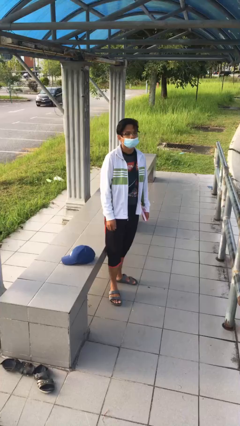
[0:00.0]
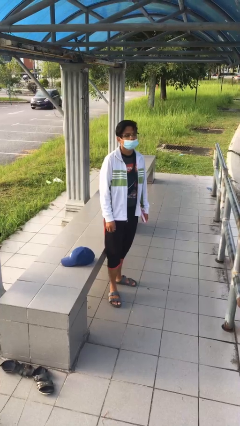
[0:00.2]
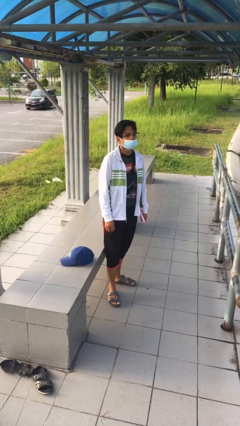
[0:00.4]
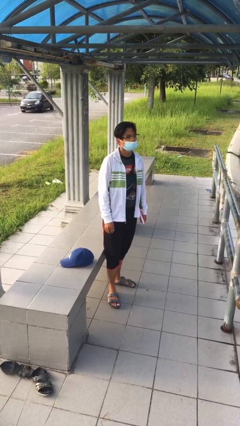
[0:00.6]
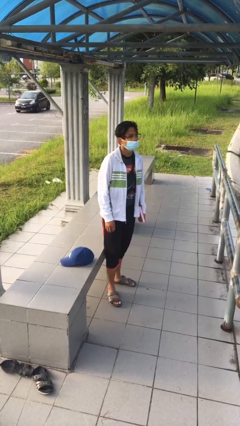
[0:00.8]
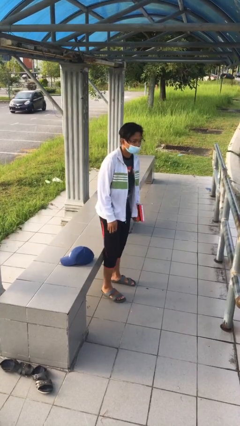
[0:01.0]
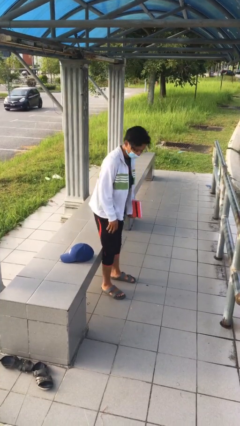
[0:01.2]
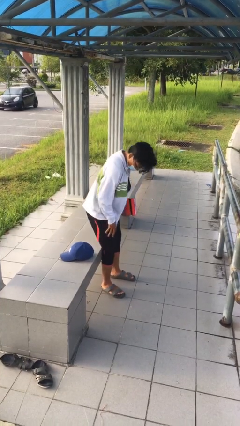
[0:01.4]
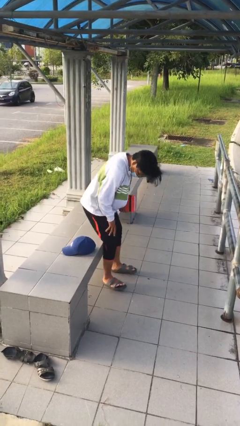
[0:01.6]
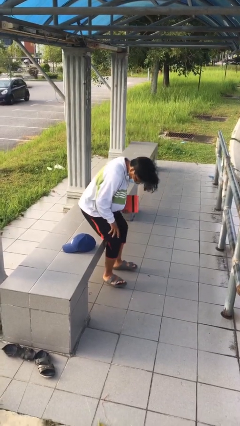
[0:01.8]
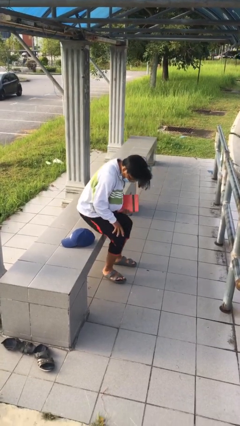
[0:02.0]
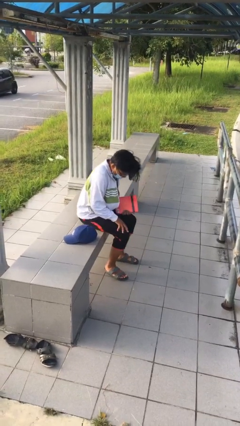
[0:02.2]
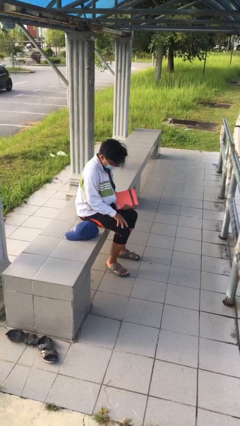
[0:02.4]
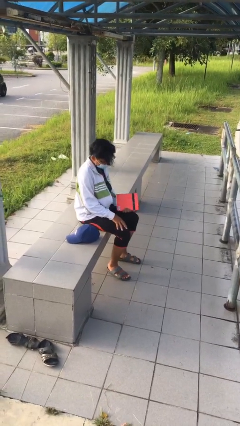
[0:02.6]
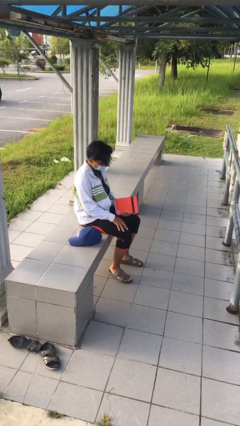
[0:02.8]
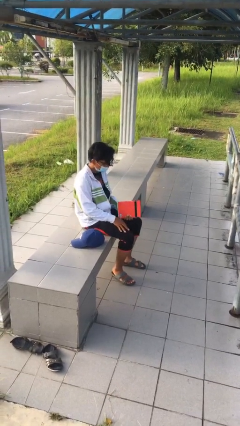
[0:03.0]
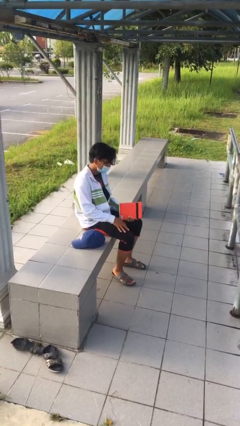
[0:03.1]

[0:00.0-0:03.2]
person sits down

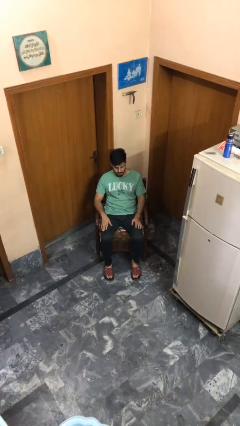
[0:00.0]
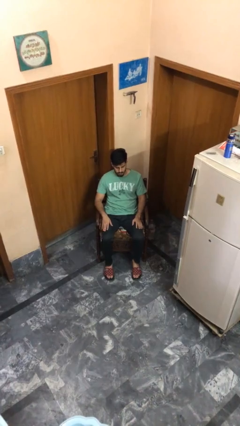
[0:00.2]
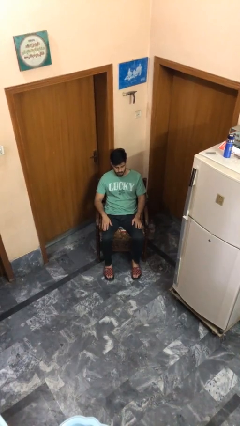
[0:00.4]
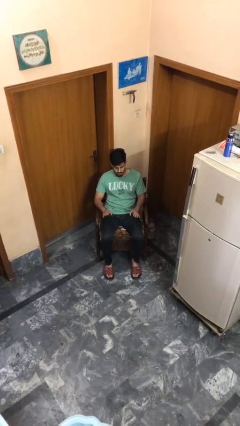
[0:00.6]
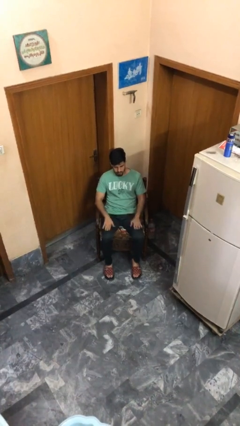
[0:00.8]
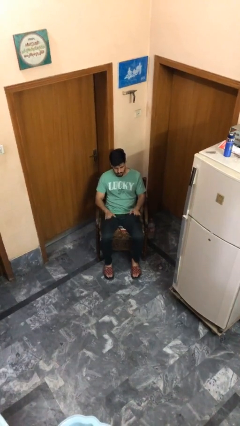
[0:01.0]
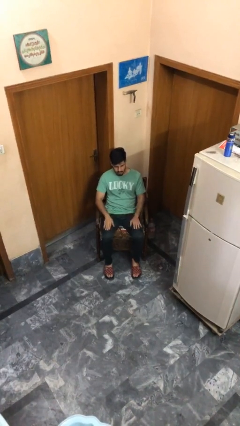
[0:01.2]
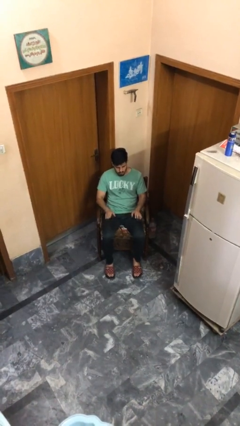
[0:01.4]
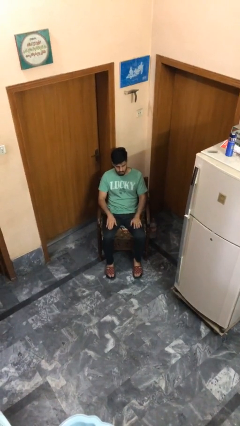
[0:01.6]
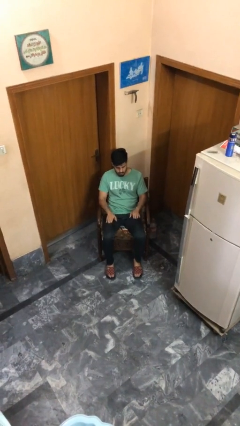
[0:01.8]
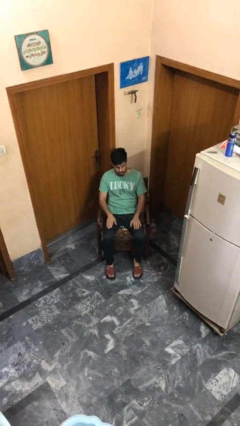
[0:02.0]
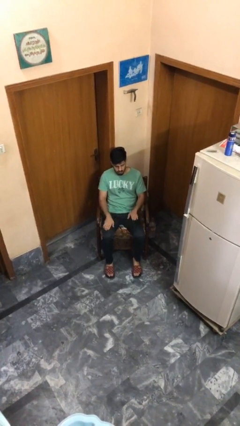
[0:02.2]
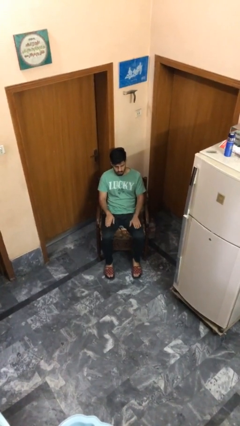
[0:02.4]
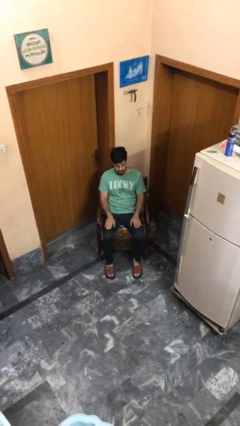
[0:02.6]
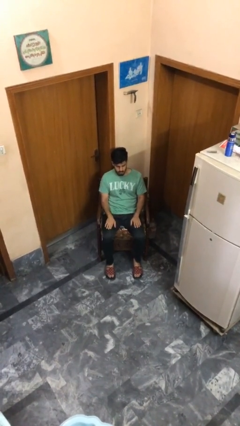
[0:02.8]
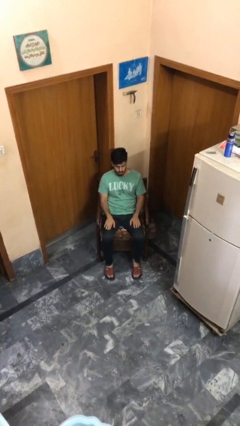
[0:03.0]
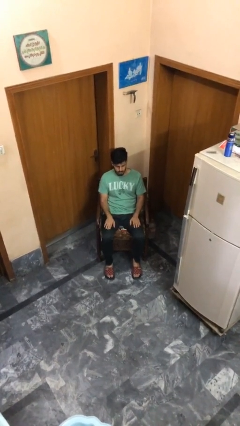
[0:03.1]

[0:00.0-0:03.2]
person slaps hands on thighs

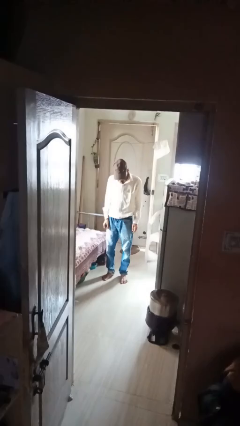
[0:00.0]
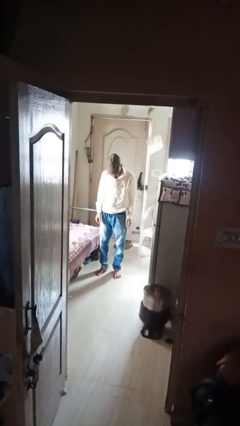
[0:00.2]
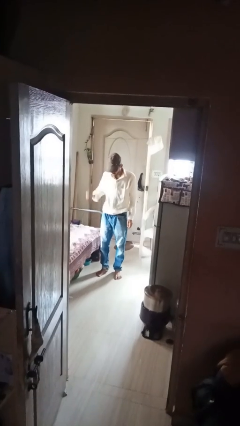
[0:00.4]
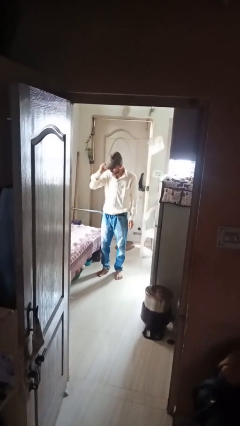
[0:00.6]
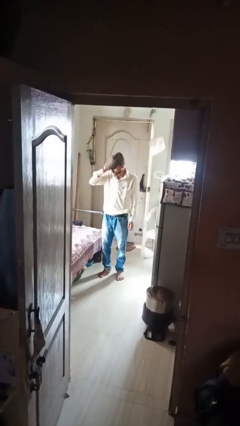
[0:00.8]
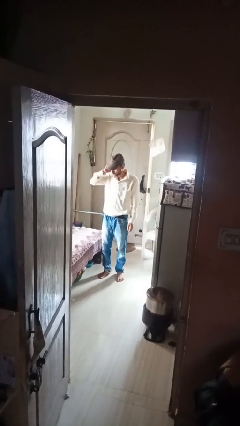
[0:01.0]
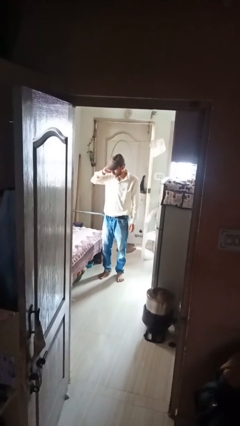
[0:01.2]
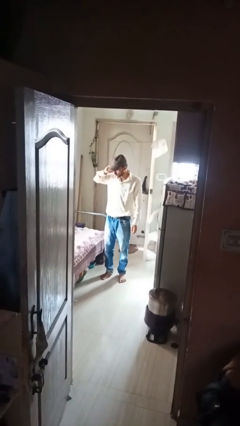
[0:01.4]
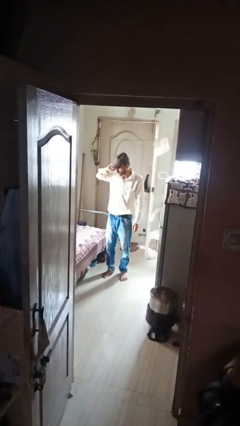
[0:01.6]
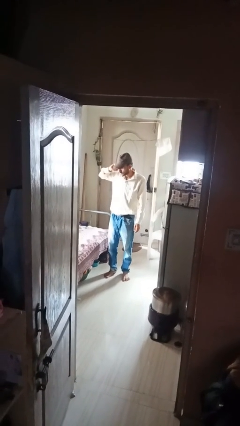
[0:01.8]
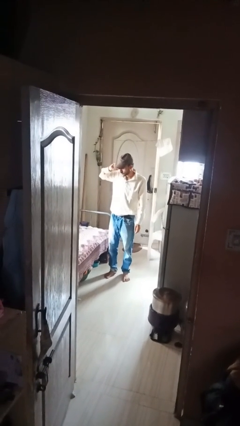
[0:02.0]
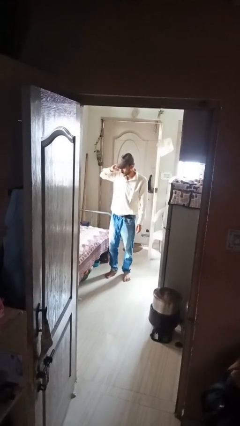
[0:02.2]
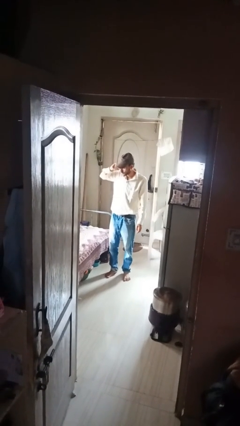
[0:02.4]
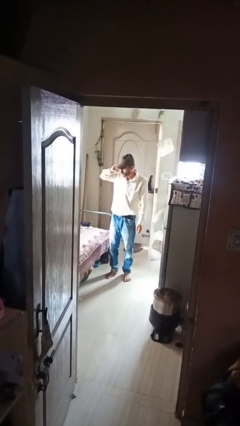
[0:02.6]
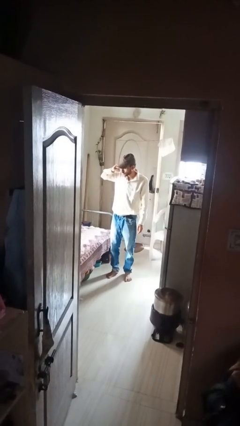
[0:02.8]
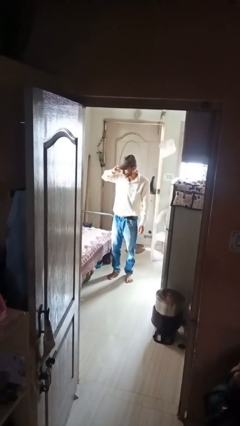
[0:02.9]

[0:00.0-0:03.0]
person touches earlobe

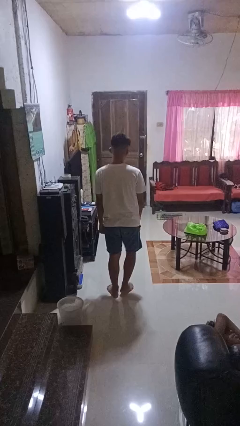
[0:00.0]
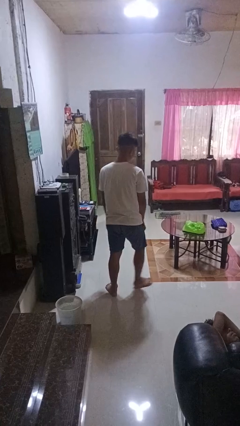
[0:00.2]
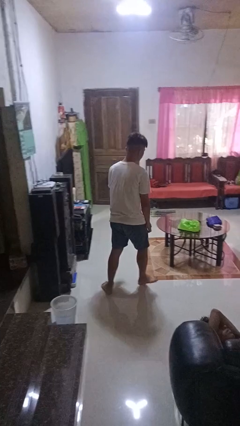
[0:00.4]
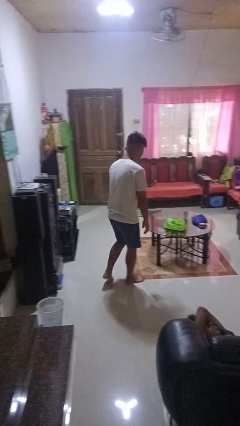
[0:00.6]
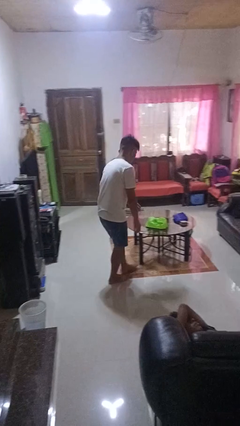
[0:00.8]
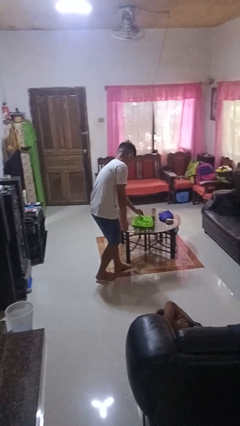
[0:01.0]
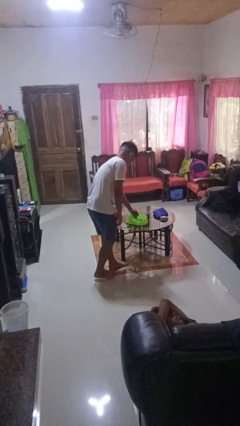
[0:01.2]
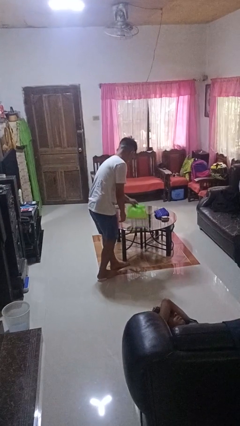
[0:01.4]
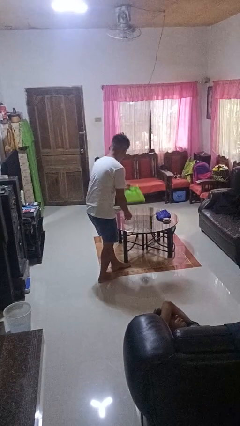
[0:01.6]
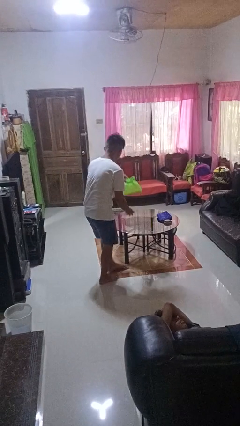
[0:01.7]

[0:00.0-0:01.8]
person picks up object from table

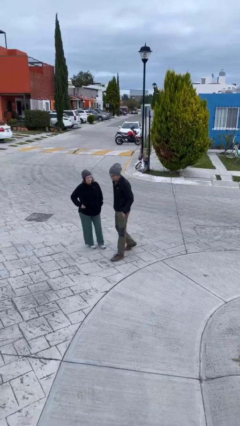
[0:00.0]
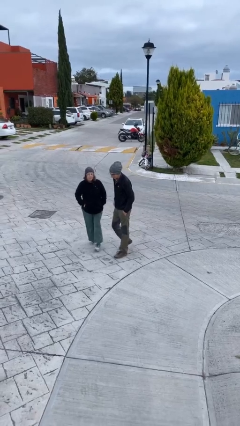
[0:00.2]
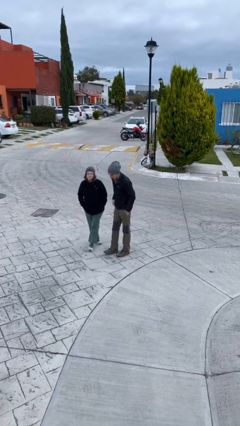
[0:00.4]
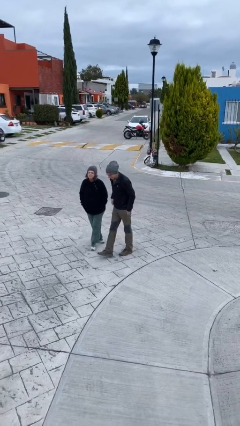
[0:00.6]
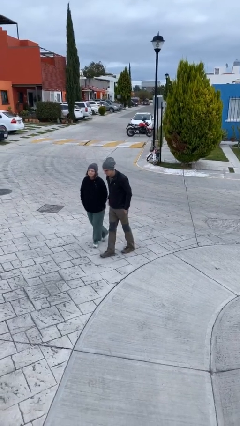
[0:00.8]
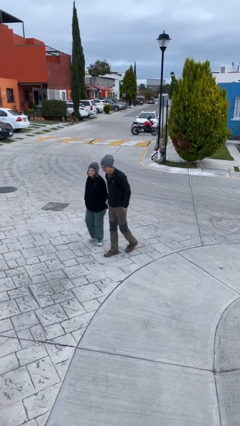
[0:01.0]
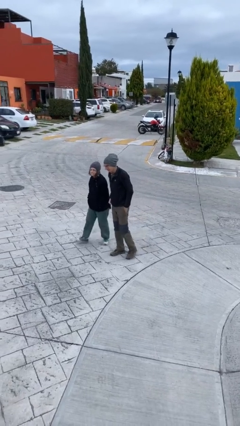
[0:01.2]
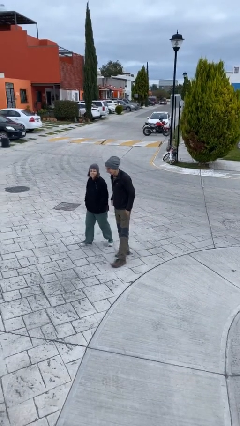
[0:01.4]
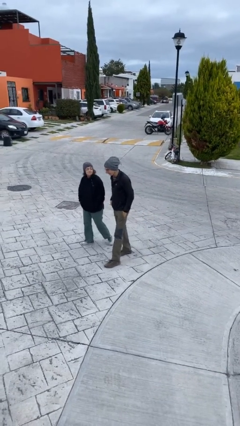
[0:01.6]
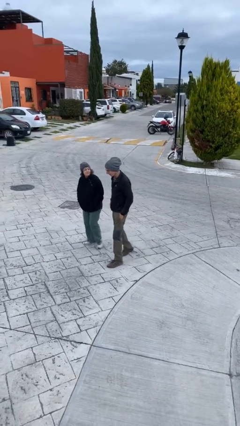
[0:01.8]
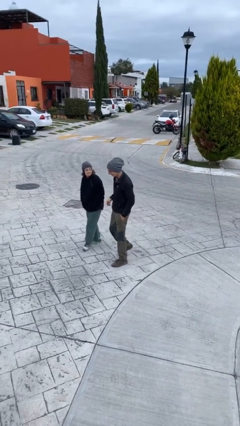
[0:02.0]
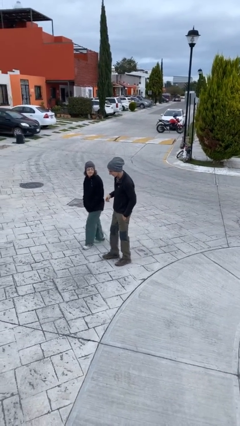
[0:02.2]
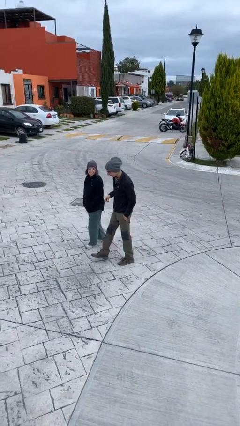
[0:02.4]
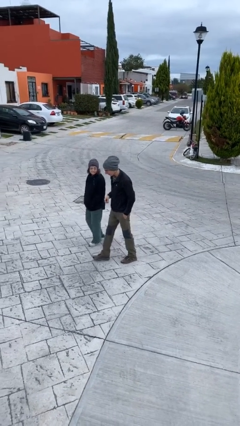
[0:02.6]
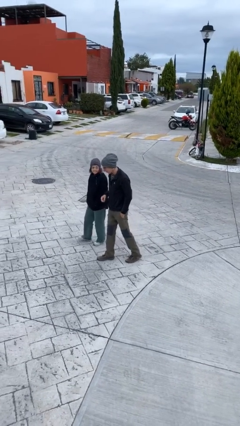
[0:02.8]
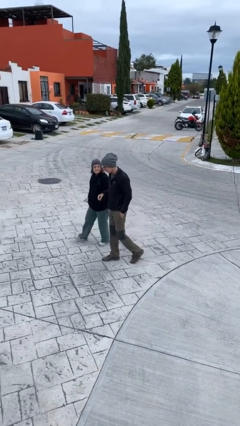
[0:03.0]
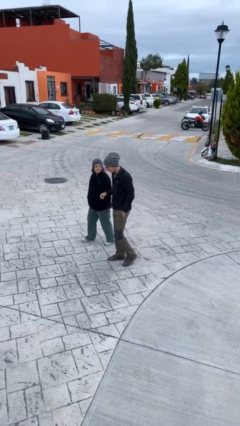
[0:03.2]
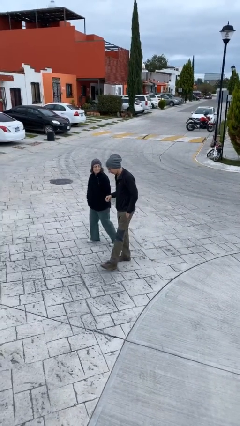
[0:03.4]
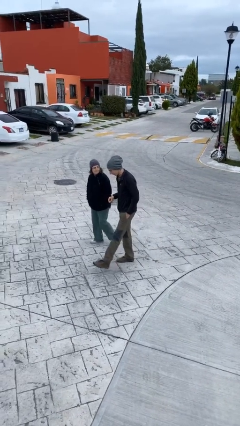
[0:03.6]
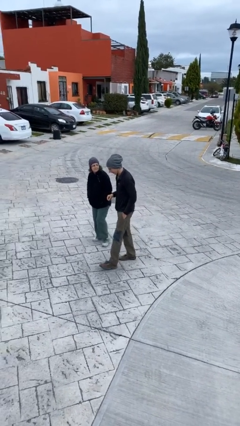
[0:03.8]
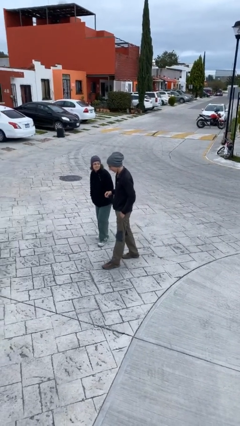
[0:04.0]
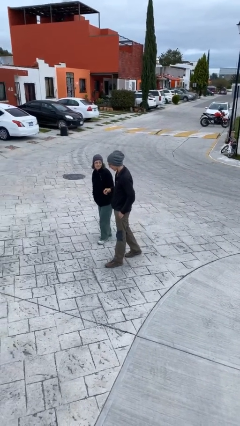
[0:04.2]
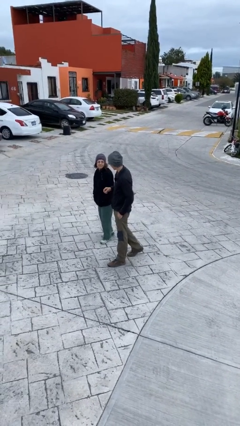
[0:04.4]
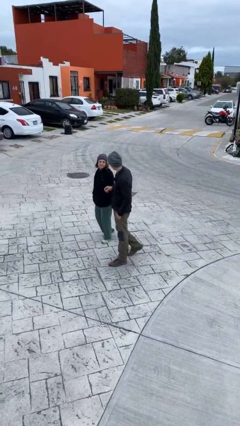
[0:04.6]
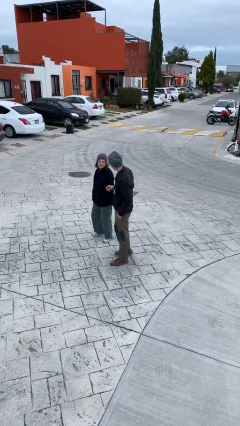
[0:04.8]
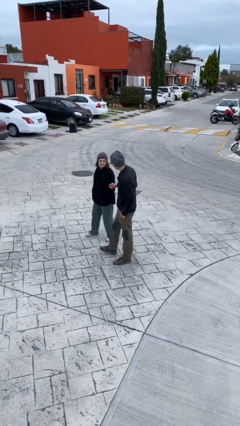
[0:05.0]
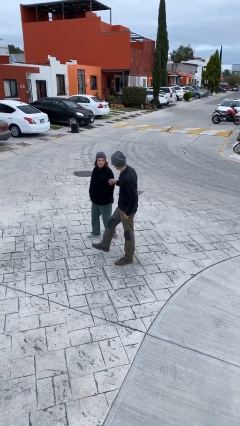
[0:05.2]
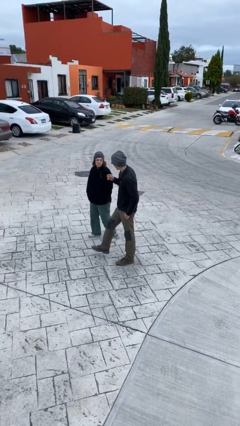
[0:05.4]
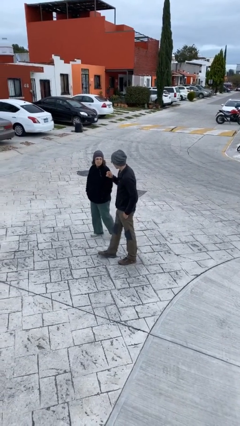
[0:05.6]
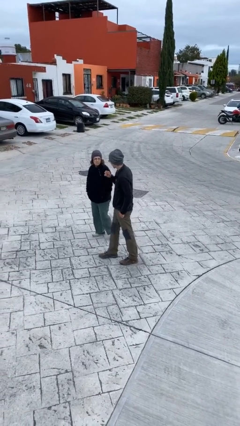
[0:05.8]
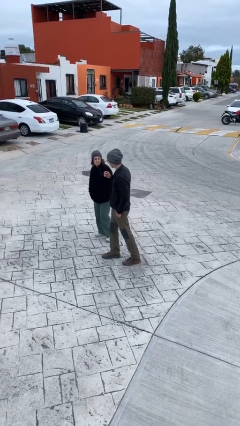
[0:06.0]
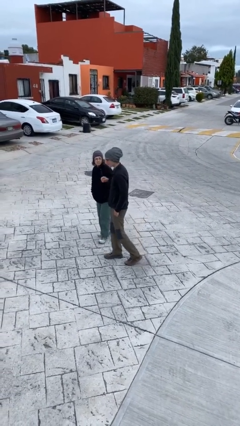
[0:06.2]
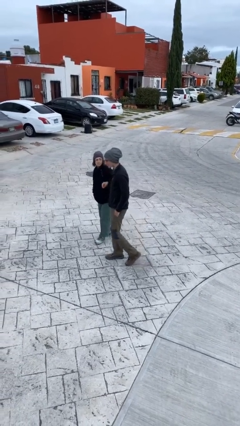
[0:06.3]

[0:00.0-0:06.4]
person talks to person
